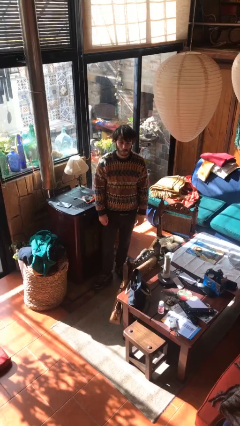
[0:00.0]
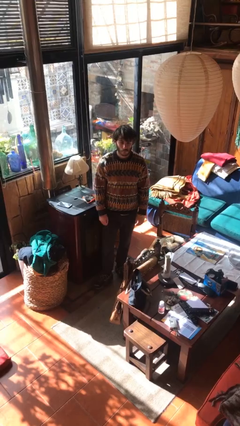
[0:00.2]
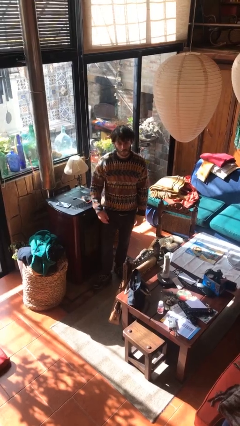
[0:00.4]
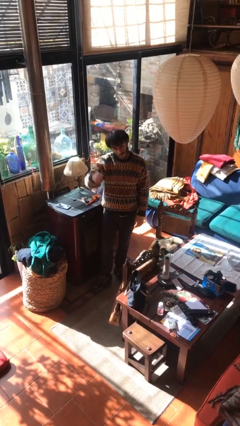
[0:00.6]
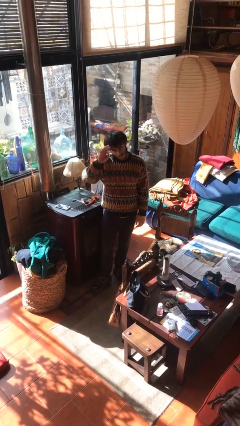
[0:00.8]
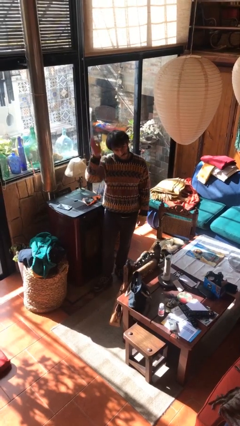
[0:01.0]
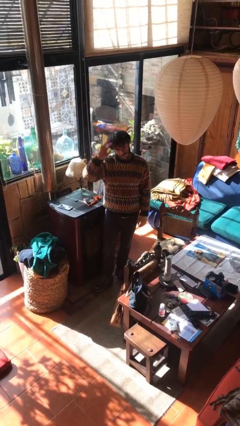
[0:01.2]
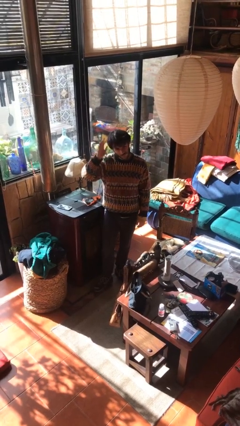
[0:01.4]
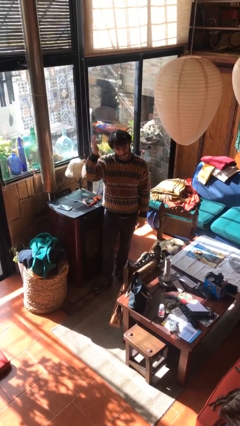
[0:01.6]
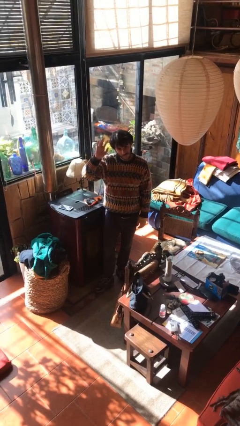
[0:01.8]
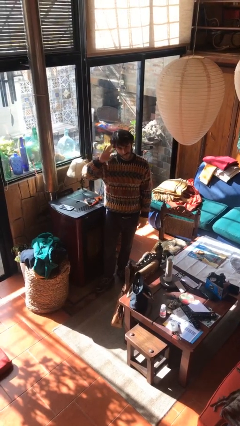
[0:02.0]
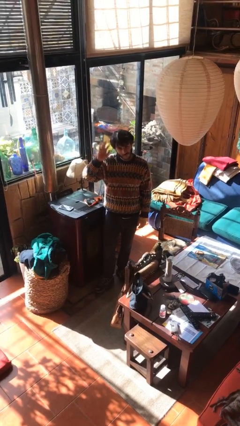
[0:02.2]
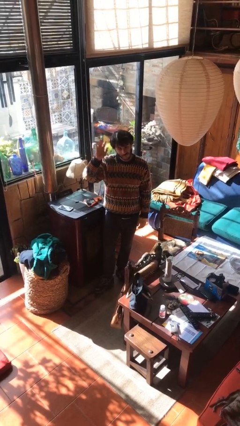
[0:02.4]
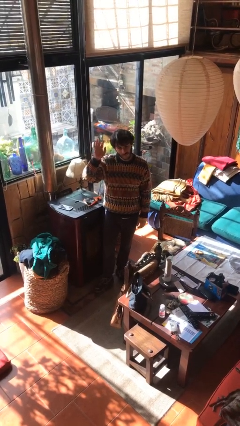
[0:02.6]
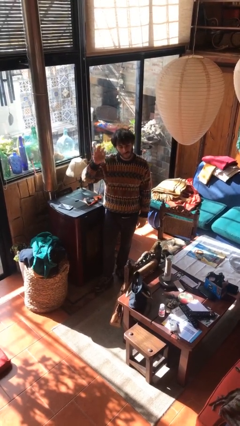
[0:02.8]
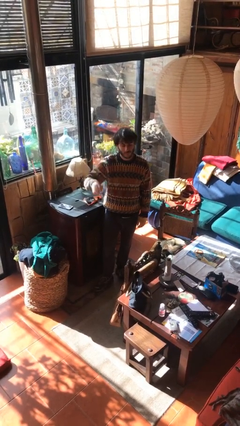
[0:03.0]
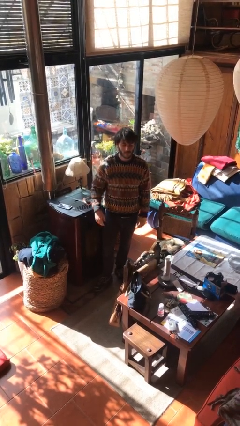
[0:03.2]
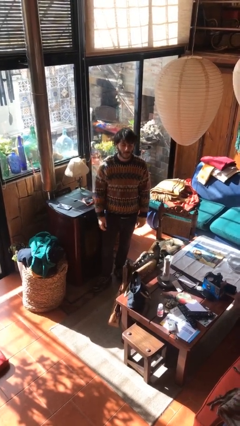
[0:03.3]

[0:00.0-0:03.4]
person waves at person

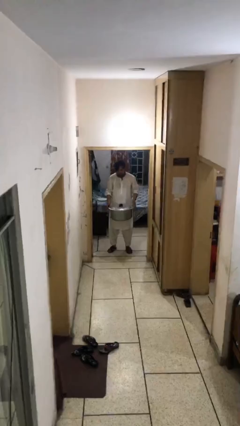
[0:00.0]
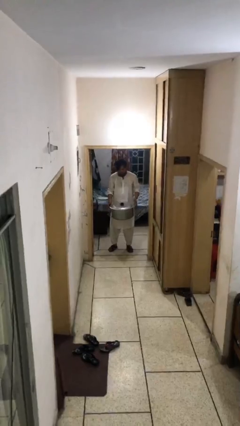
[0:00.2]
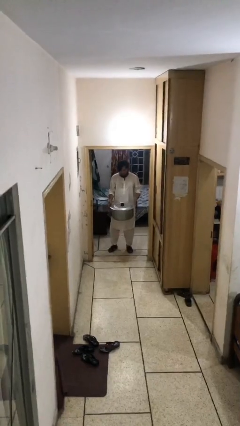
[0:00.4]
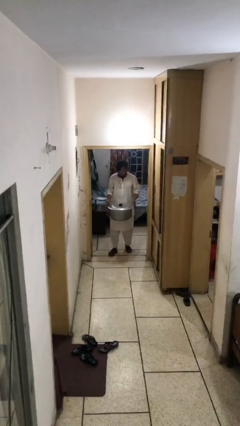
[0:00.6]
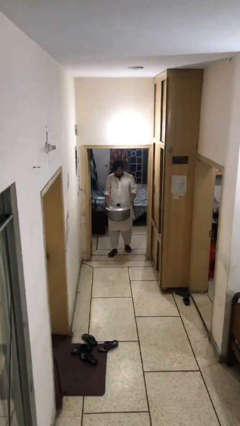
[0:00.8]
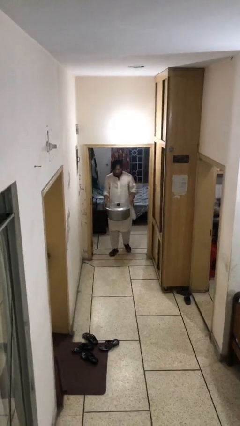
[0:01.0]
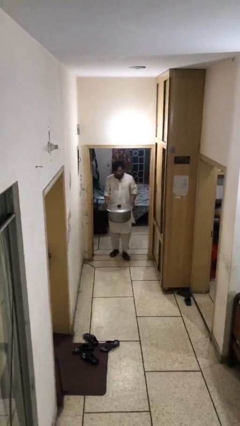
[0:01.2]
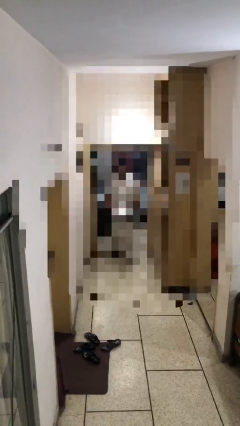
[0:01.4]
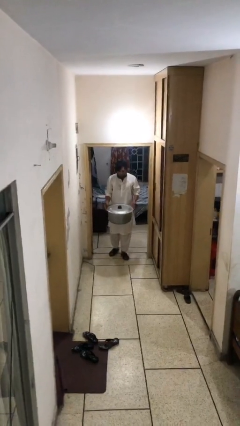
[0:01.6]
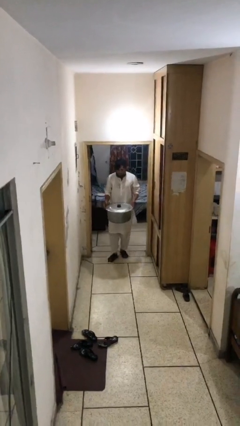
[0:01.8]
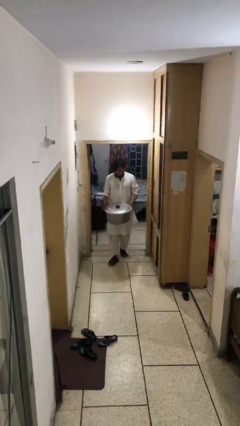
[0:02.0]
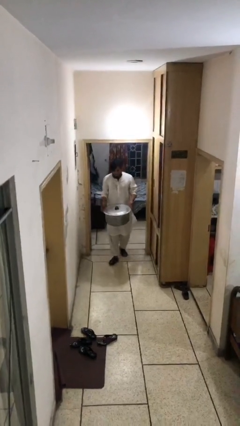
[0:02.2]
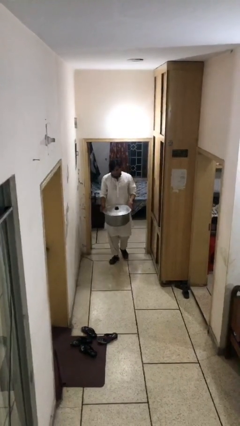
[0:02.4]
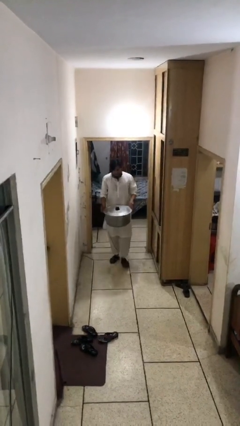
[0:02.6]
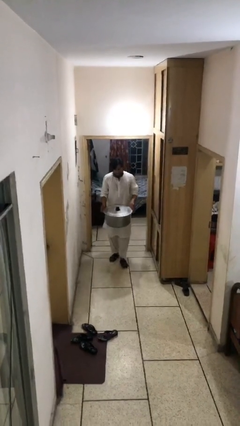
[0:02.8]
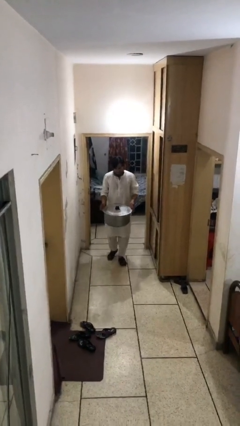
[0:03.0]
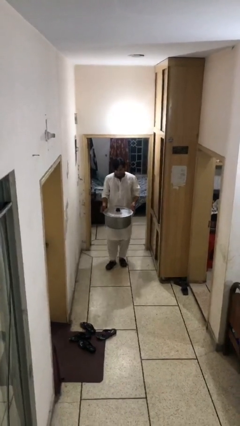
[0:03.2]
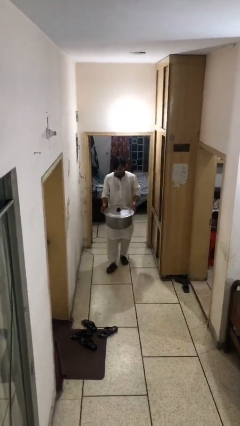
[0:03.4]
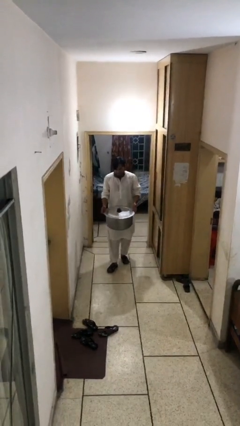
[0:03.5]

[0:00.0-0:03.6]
person carries heavy object

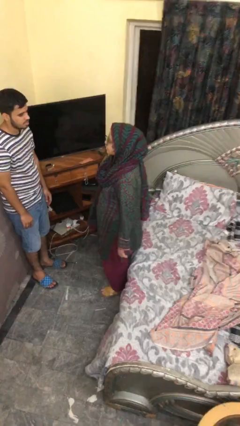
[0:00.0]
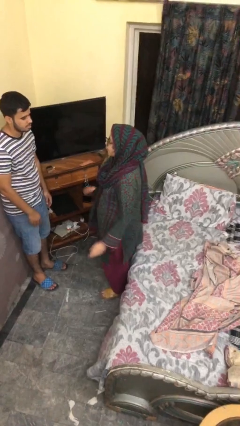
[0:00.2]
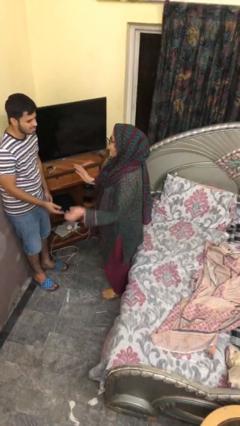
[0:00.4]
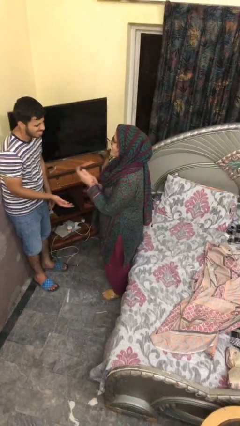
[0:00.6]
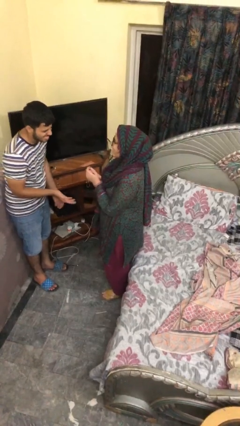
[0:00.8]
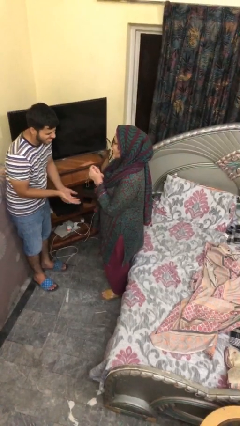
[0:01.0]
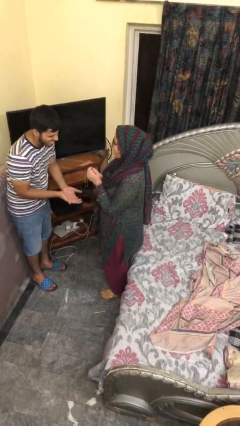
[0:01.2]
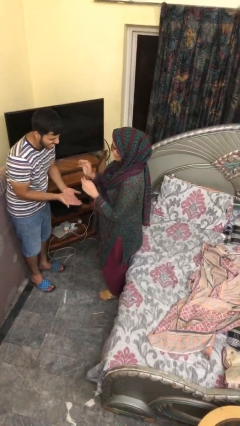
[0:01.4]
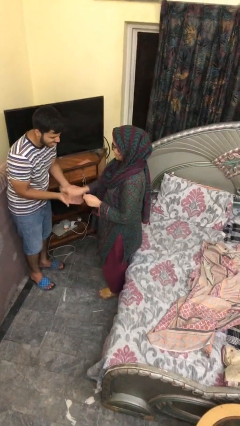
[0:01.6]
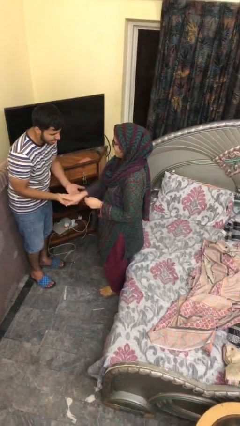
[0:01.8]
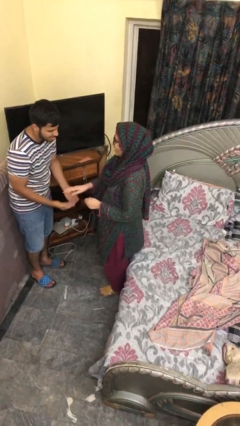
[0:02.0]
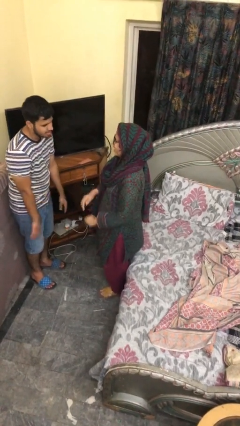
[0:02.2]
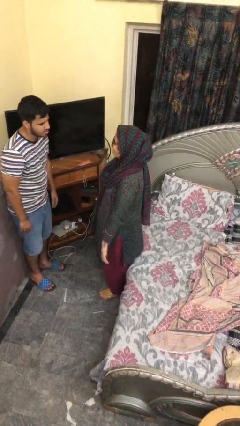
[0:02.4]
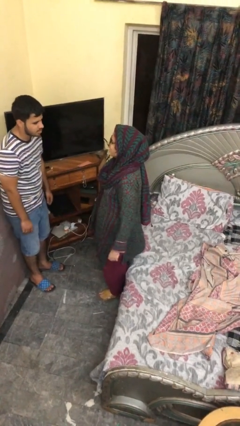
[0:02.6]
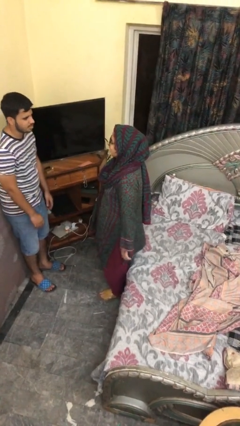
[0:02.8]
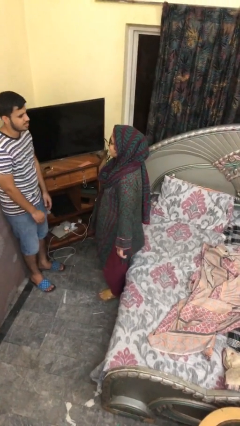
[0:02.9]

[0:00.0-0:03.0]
person laughs with person

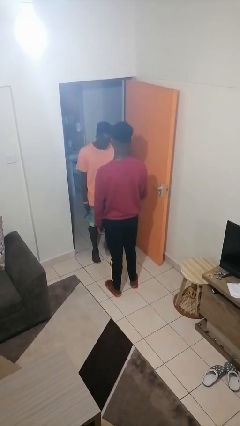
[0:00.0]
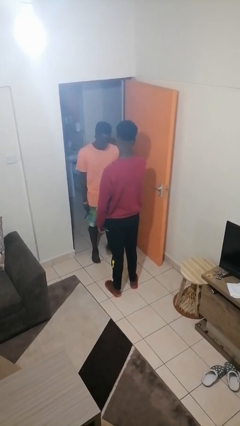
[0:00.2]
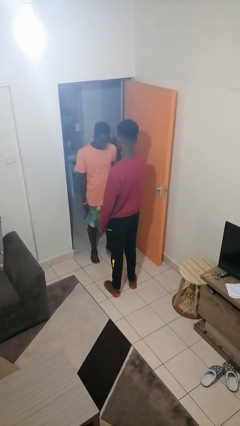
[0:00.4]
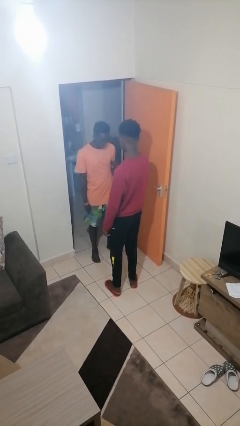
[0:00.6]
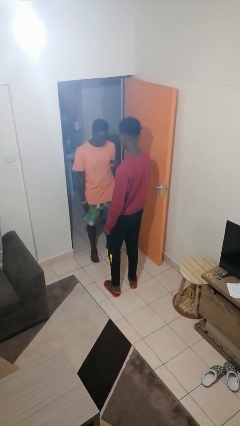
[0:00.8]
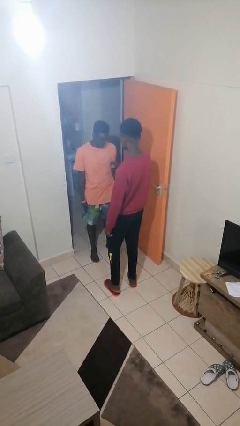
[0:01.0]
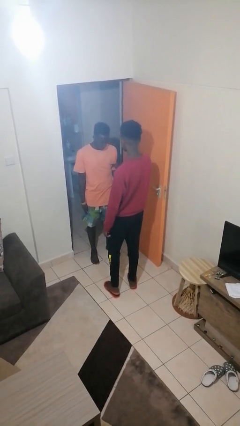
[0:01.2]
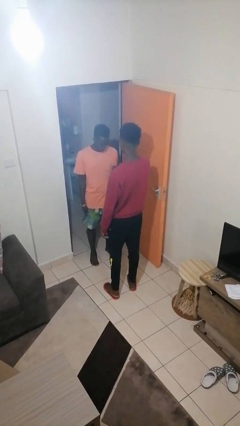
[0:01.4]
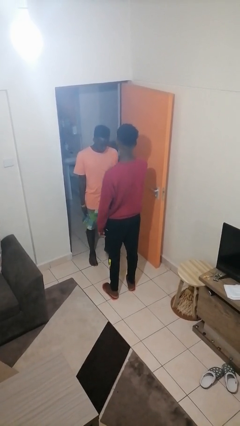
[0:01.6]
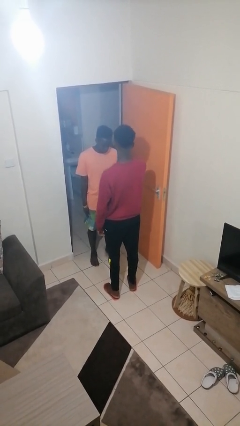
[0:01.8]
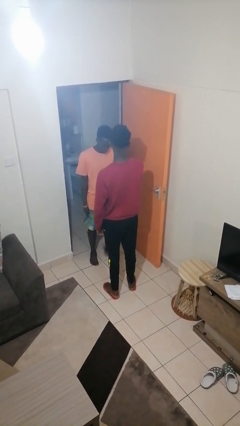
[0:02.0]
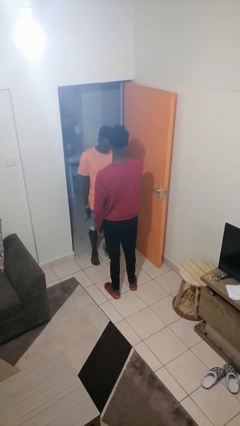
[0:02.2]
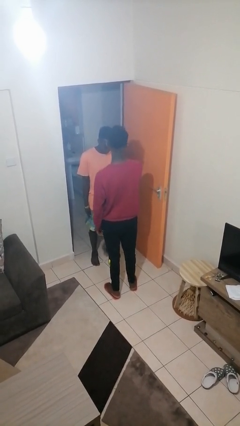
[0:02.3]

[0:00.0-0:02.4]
person grabs person by bicep

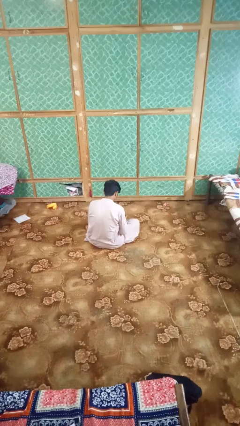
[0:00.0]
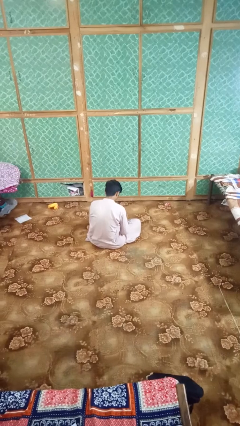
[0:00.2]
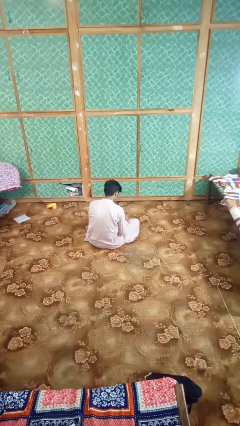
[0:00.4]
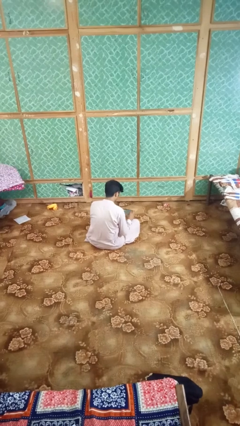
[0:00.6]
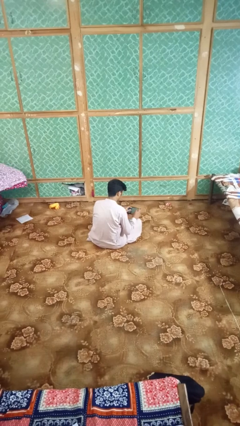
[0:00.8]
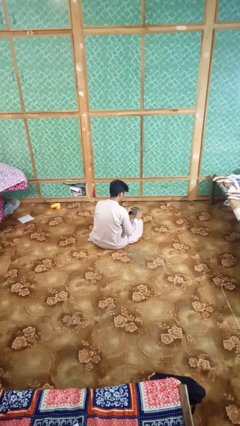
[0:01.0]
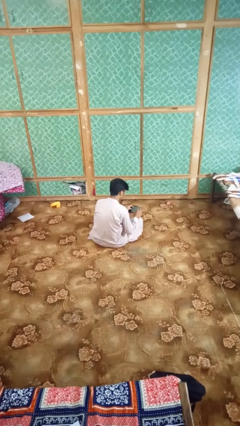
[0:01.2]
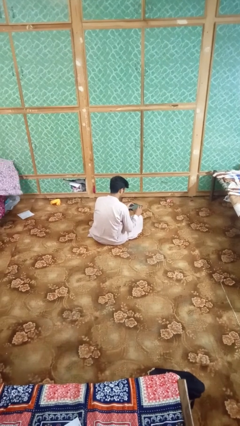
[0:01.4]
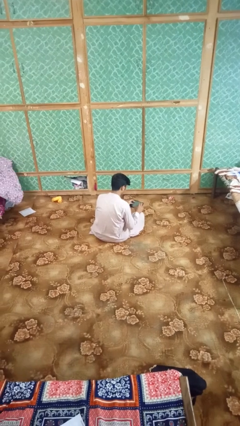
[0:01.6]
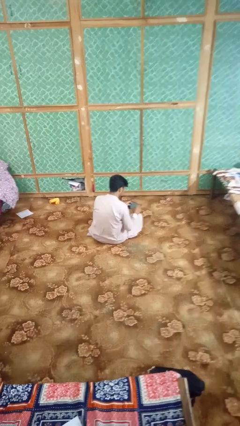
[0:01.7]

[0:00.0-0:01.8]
person interacts with tablet

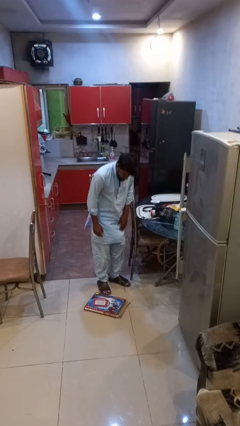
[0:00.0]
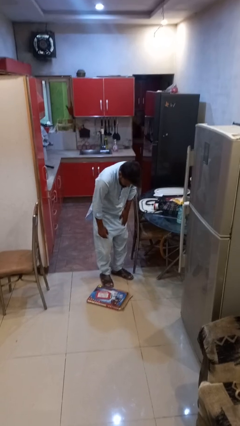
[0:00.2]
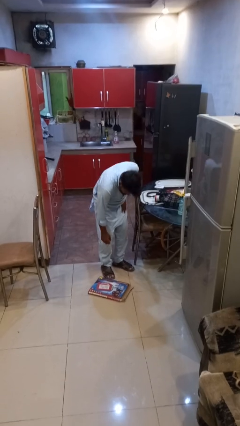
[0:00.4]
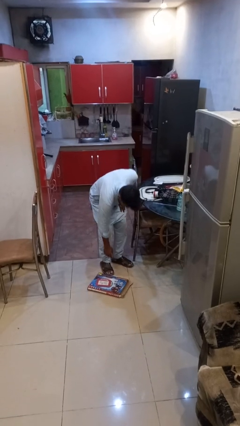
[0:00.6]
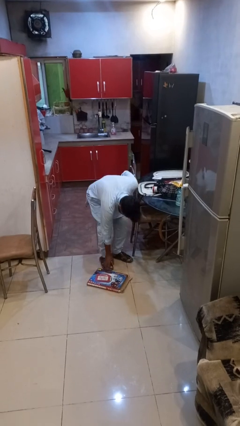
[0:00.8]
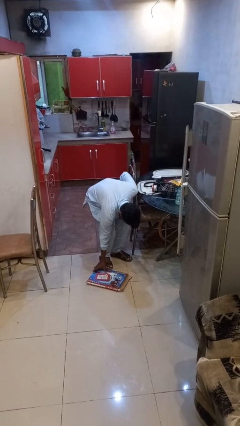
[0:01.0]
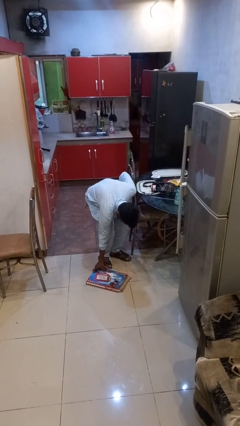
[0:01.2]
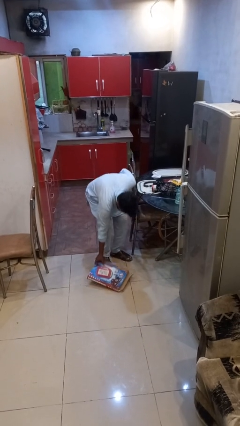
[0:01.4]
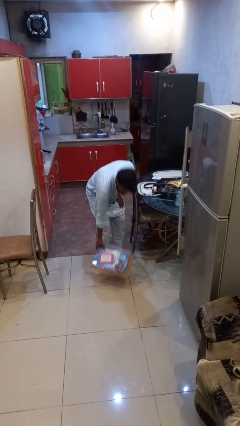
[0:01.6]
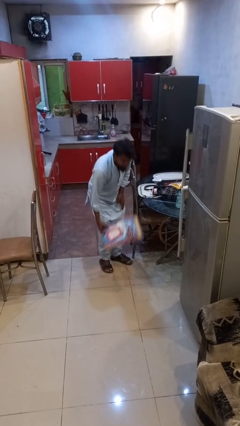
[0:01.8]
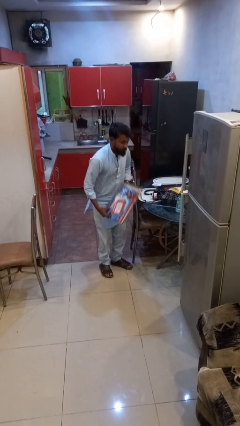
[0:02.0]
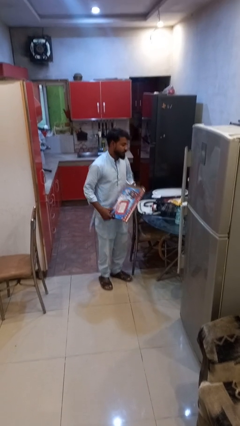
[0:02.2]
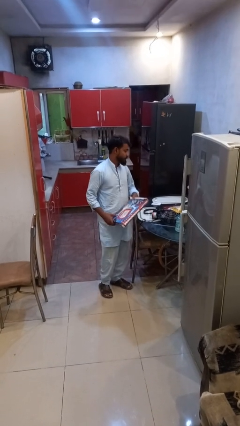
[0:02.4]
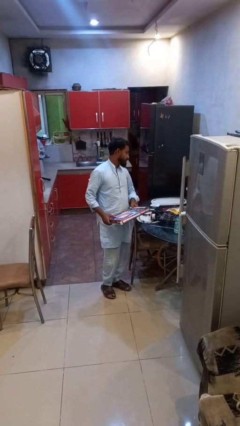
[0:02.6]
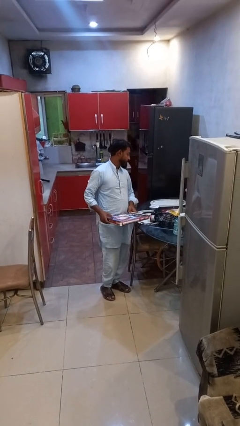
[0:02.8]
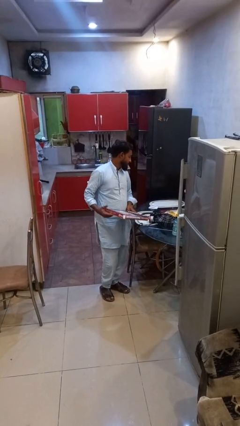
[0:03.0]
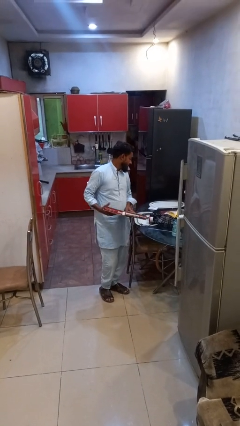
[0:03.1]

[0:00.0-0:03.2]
person picks up object from floor
